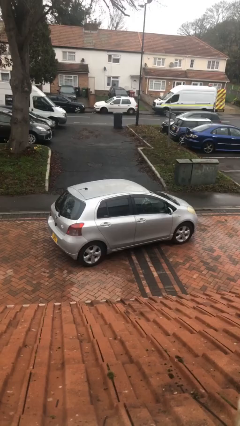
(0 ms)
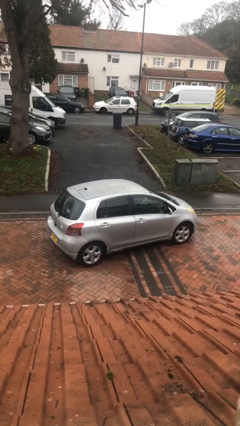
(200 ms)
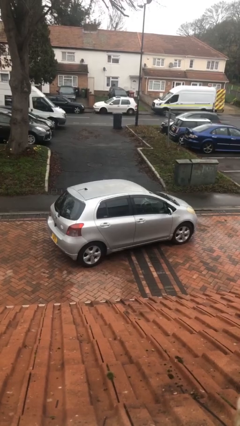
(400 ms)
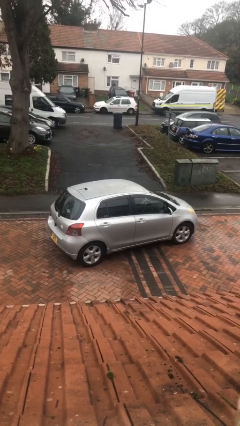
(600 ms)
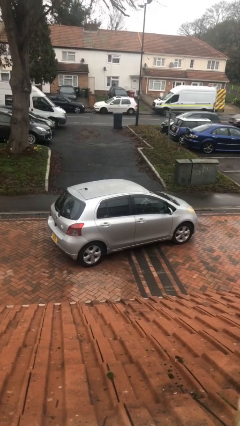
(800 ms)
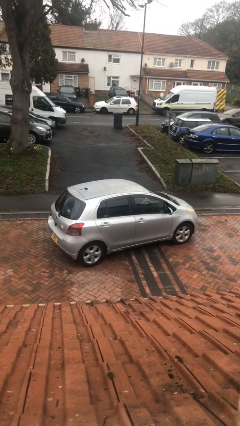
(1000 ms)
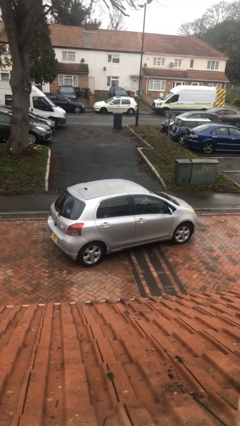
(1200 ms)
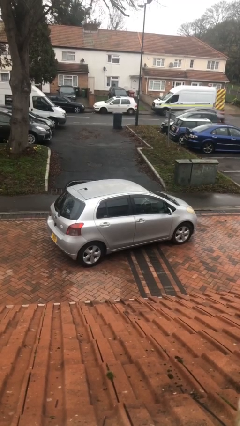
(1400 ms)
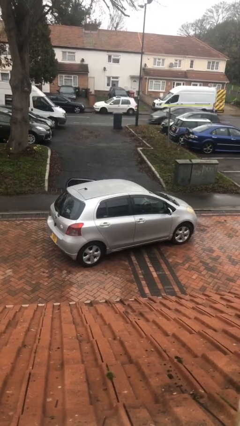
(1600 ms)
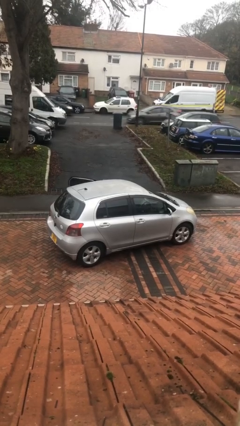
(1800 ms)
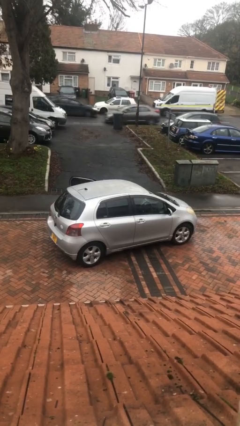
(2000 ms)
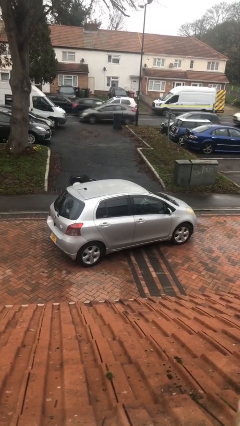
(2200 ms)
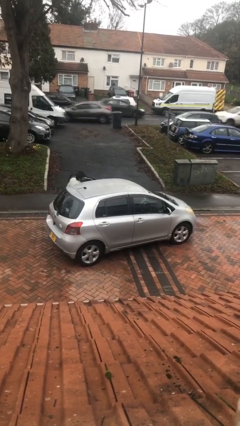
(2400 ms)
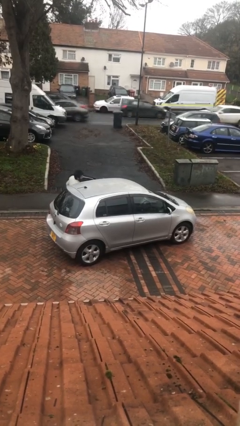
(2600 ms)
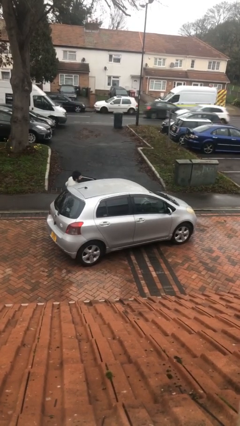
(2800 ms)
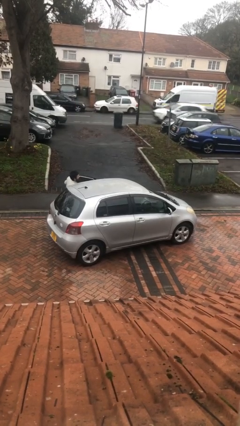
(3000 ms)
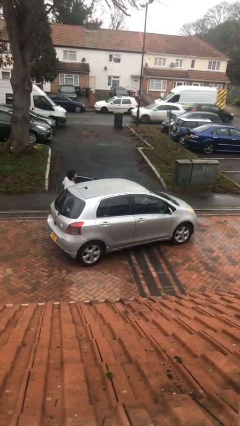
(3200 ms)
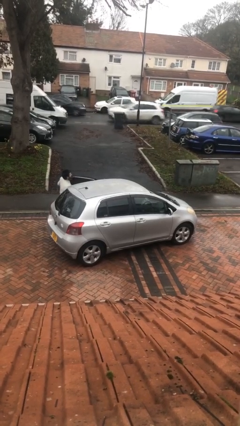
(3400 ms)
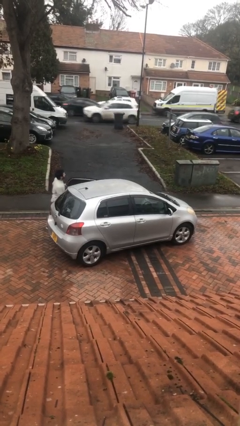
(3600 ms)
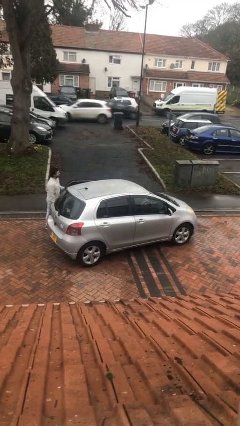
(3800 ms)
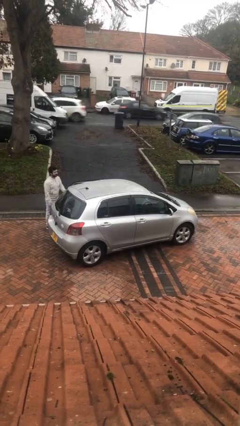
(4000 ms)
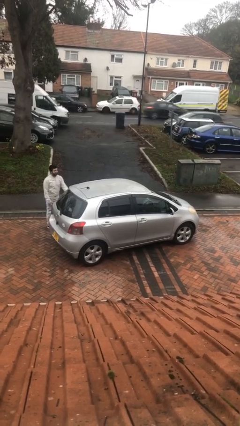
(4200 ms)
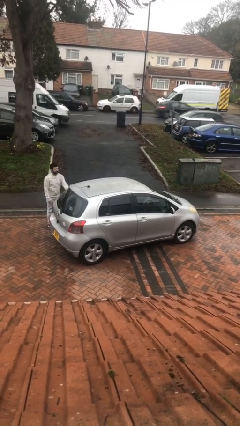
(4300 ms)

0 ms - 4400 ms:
car drops off person

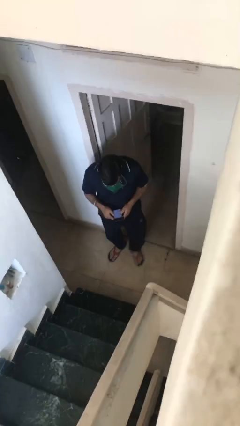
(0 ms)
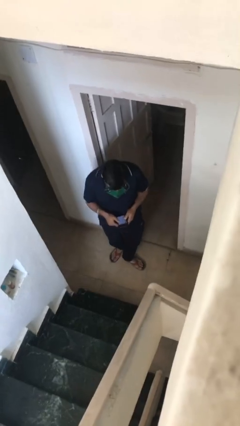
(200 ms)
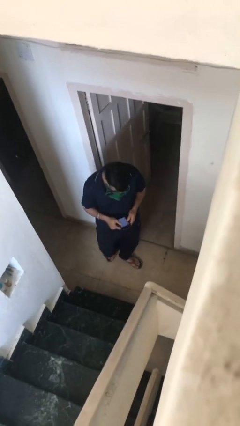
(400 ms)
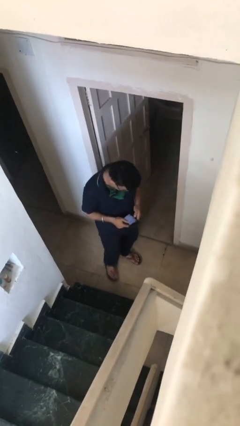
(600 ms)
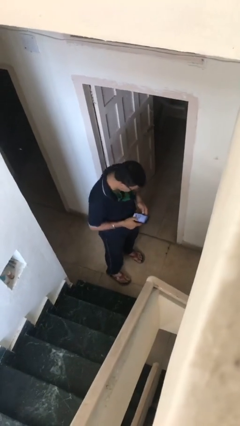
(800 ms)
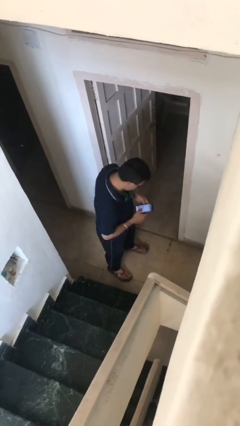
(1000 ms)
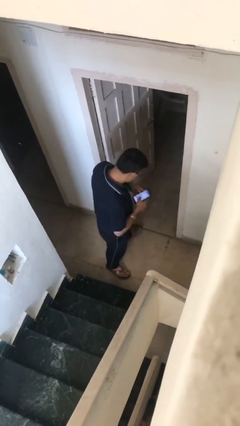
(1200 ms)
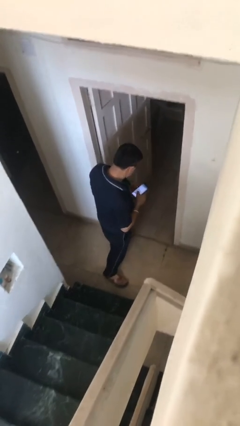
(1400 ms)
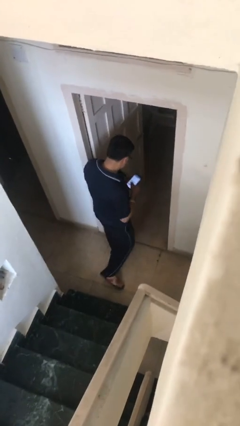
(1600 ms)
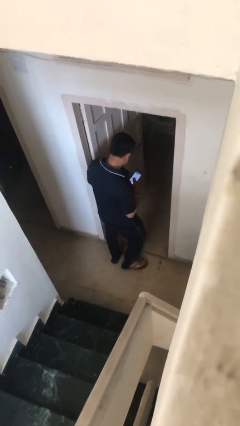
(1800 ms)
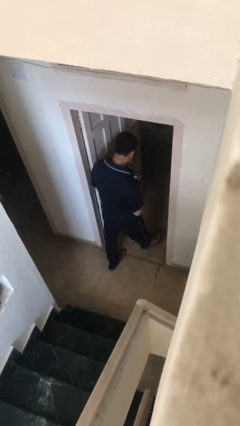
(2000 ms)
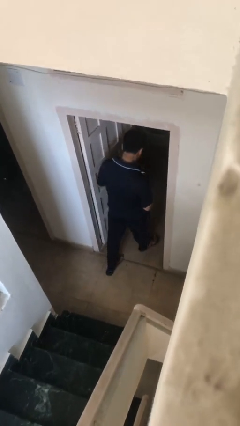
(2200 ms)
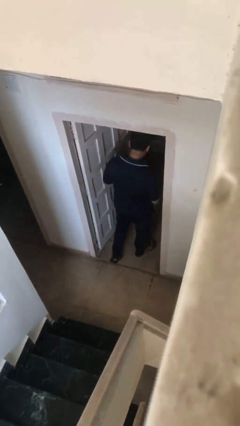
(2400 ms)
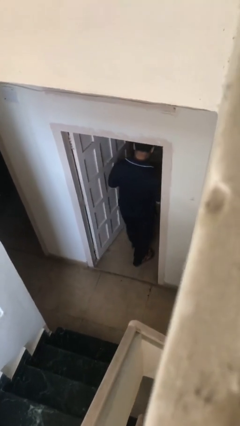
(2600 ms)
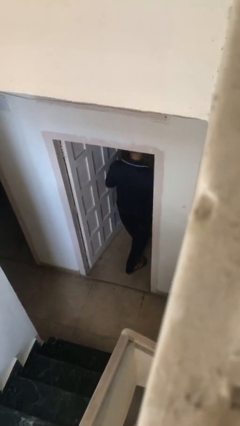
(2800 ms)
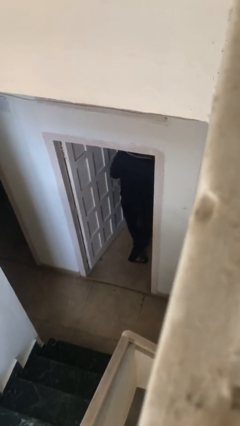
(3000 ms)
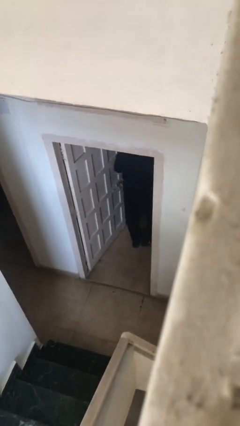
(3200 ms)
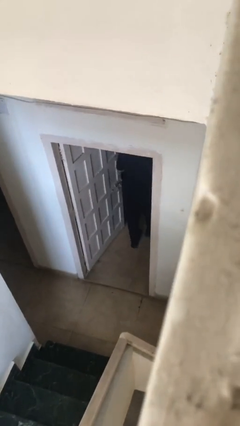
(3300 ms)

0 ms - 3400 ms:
person exits scene through structure

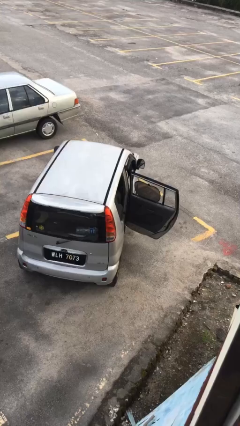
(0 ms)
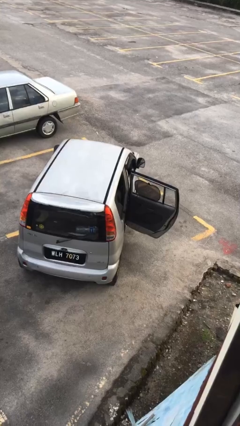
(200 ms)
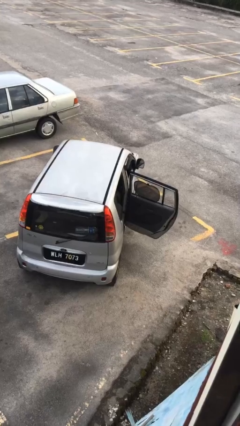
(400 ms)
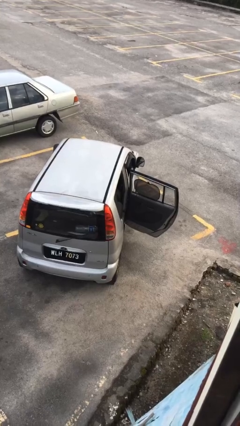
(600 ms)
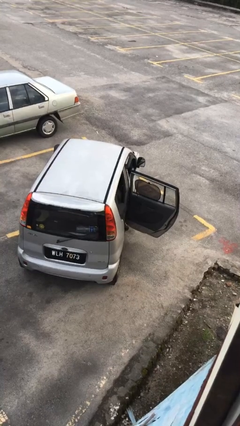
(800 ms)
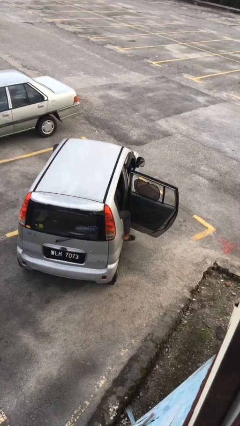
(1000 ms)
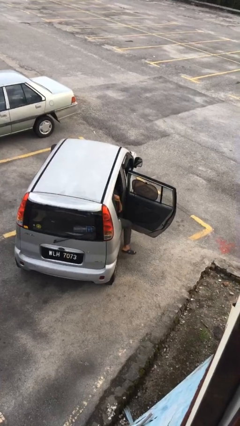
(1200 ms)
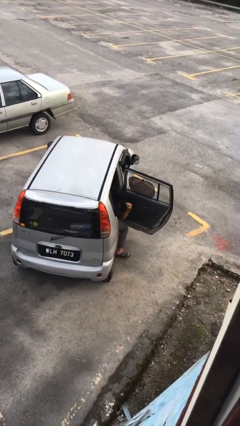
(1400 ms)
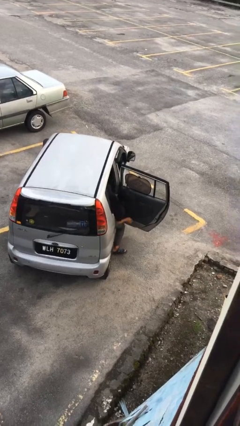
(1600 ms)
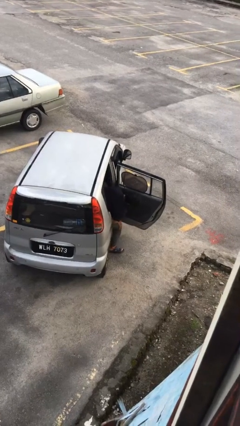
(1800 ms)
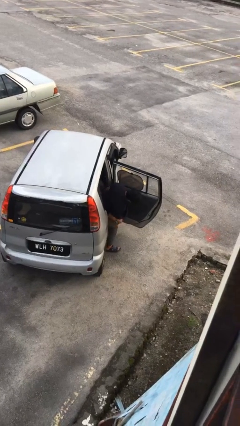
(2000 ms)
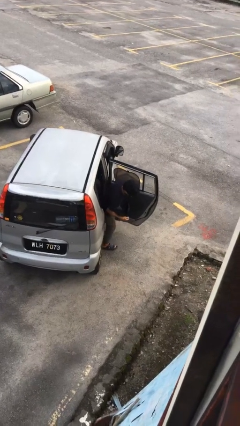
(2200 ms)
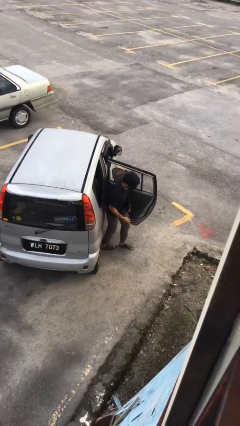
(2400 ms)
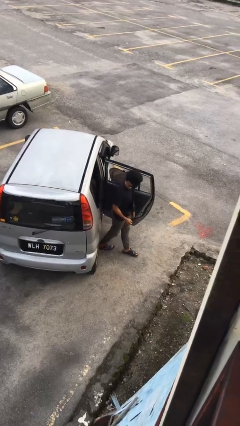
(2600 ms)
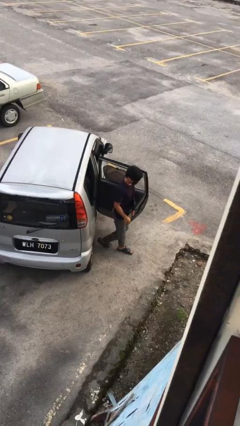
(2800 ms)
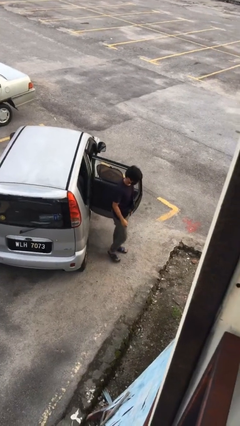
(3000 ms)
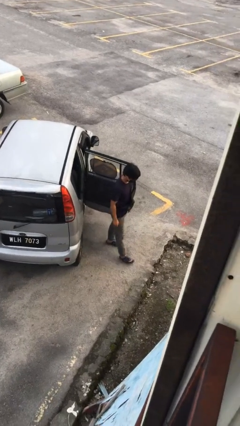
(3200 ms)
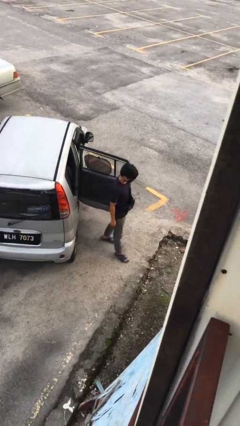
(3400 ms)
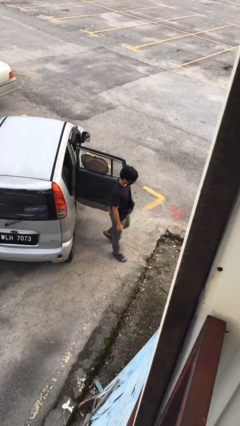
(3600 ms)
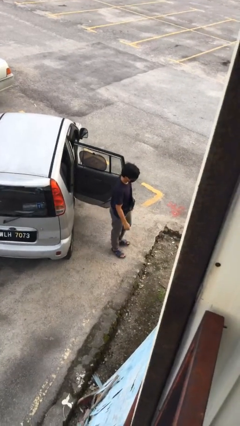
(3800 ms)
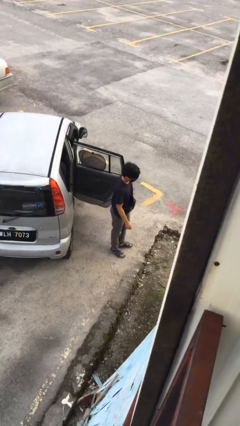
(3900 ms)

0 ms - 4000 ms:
person exits car

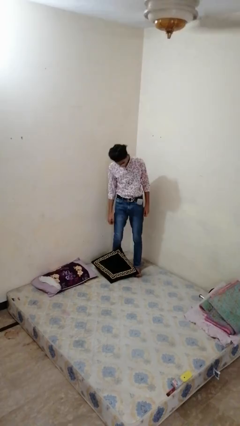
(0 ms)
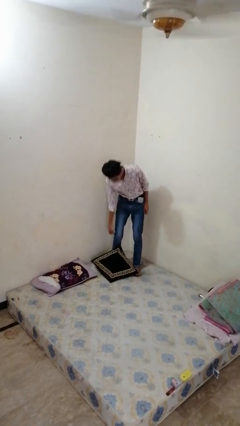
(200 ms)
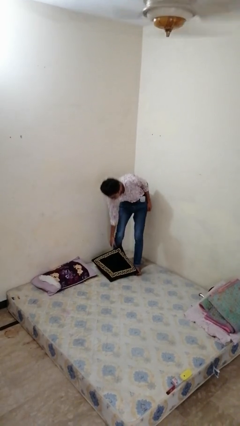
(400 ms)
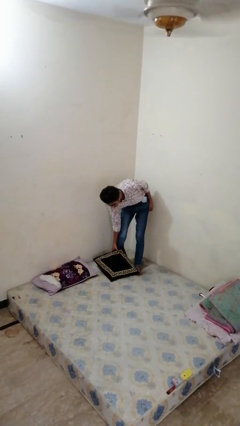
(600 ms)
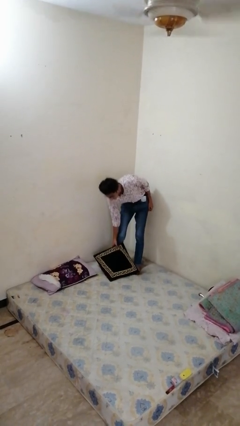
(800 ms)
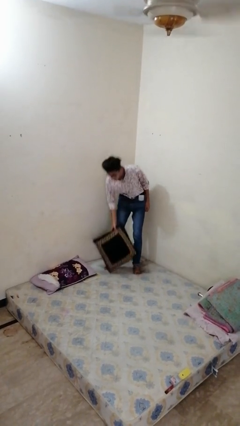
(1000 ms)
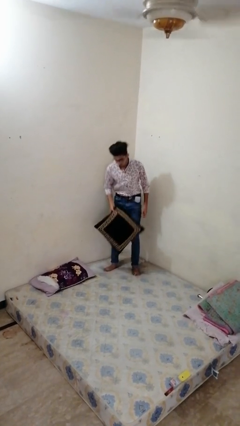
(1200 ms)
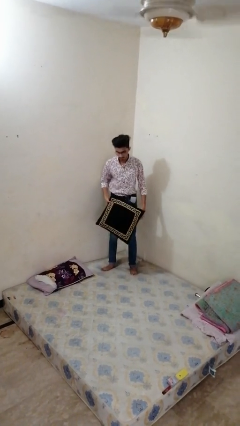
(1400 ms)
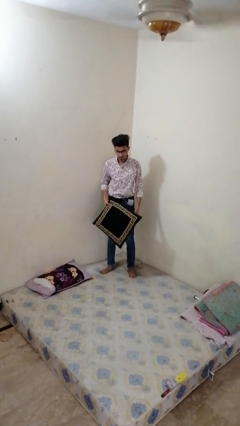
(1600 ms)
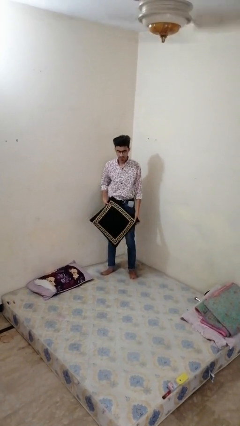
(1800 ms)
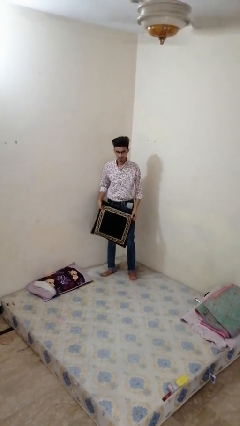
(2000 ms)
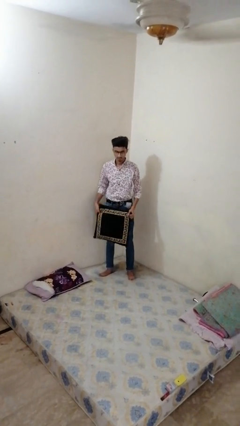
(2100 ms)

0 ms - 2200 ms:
person picks up object from bed

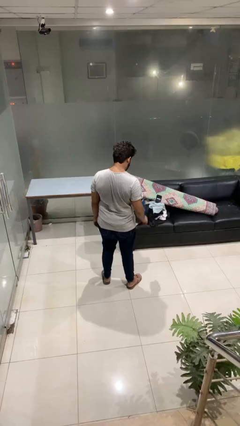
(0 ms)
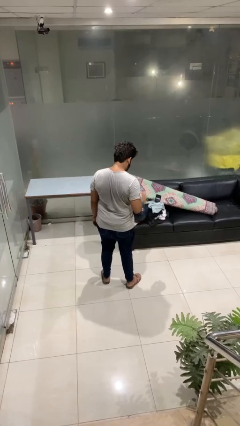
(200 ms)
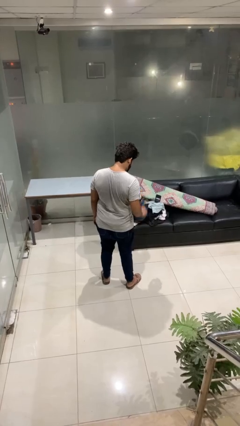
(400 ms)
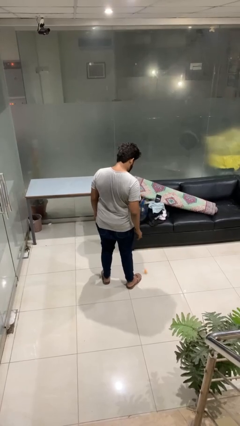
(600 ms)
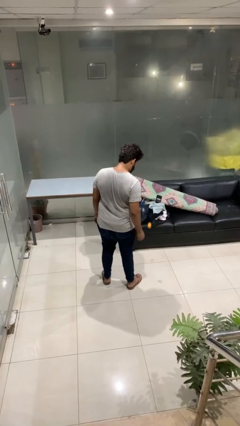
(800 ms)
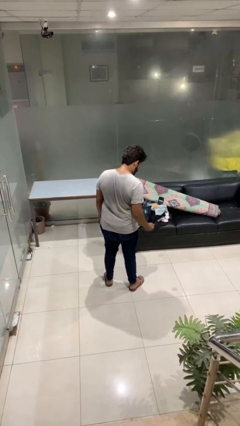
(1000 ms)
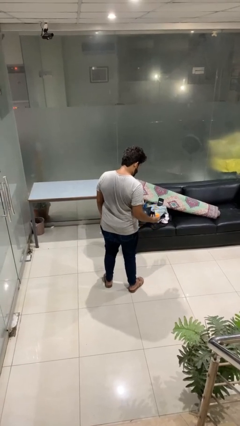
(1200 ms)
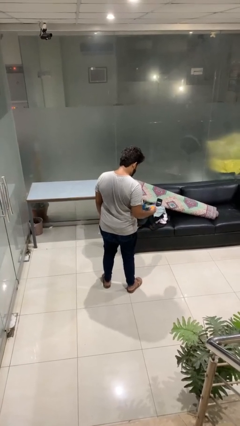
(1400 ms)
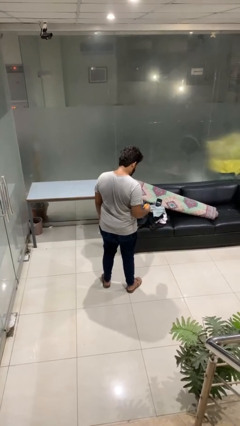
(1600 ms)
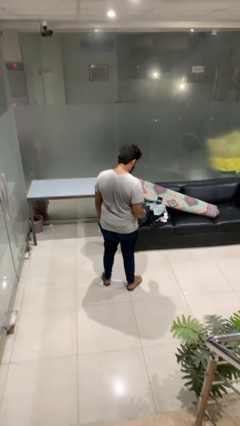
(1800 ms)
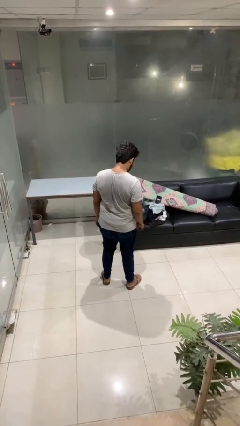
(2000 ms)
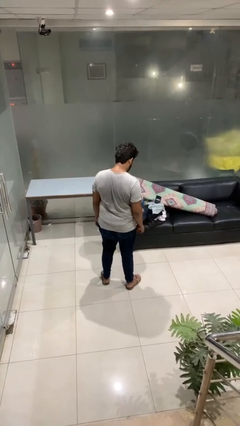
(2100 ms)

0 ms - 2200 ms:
person bounces ball on floor

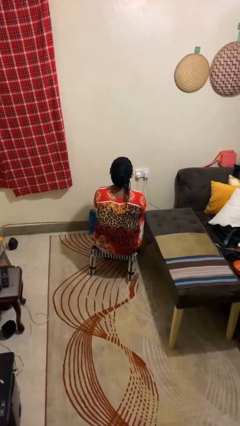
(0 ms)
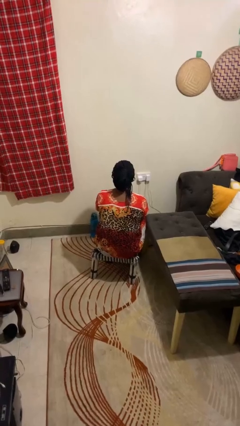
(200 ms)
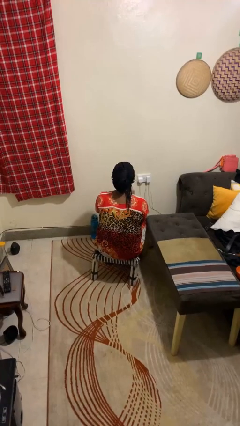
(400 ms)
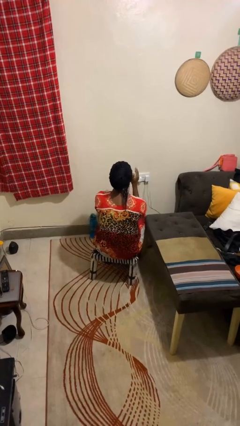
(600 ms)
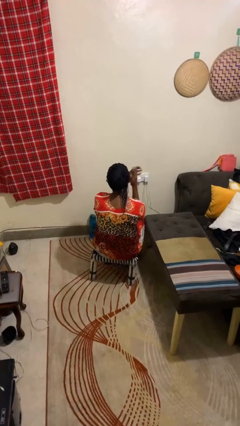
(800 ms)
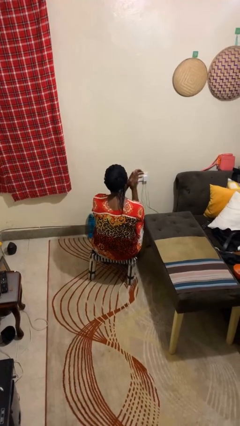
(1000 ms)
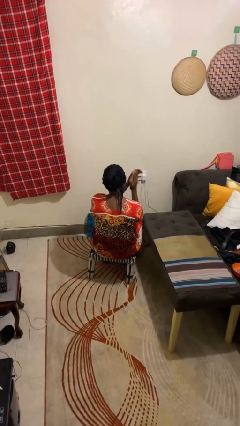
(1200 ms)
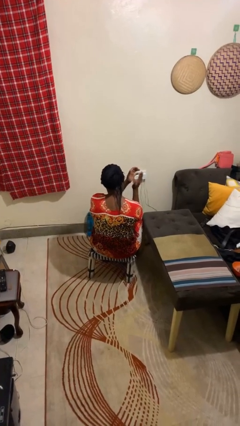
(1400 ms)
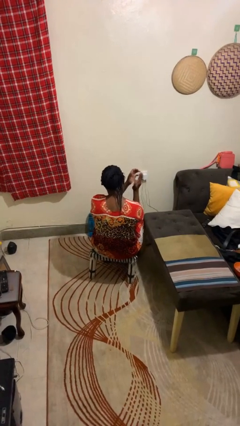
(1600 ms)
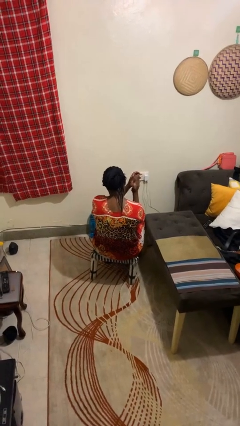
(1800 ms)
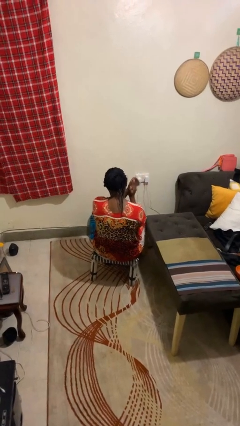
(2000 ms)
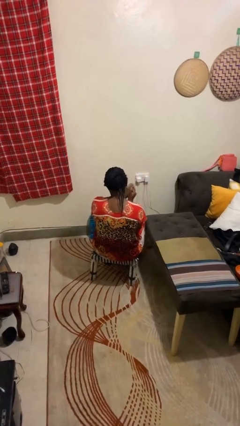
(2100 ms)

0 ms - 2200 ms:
person claps hands
